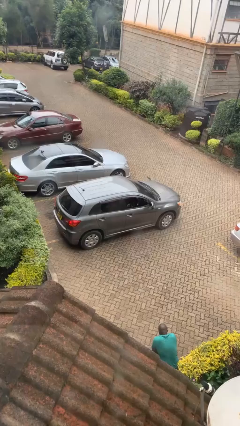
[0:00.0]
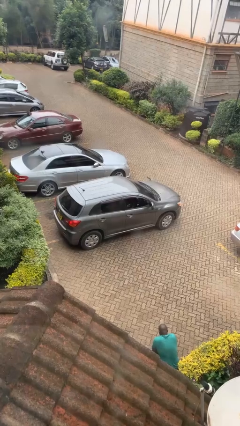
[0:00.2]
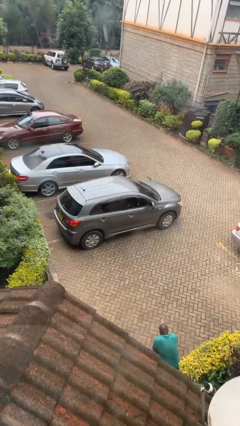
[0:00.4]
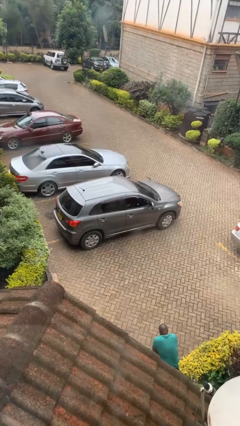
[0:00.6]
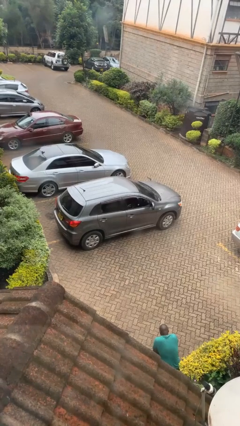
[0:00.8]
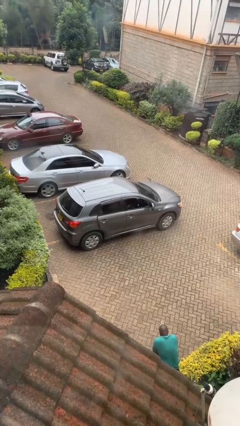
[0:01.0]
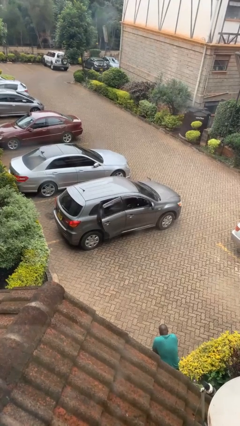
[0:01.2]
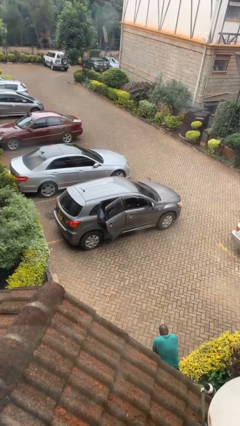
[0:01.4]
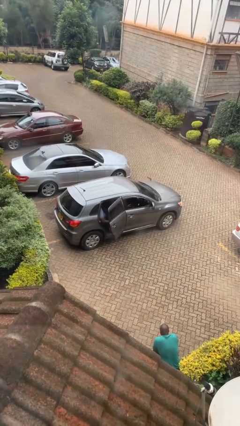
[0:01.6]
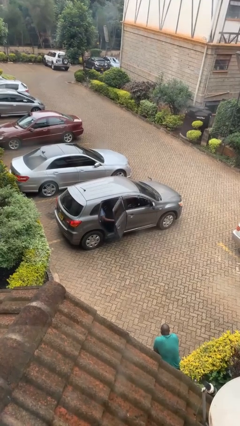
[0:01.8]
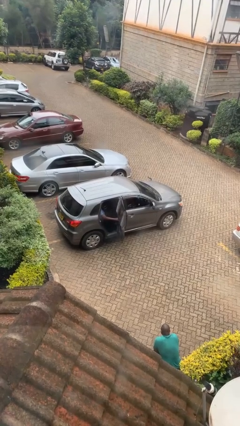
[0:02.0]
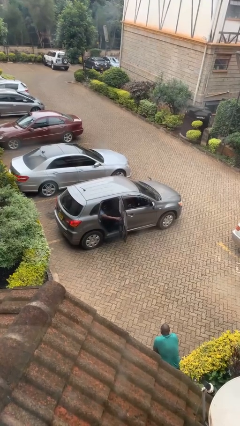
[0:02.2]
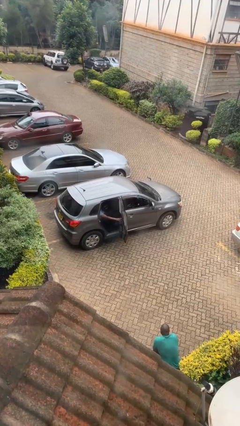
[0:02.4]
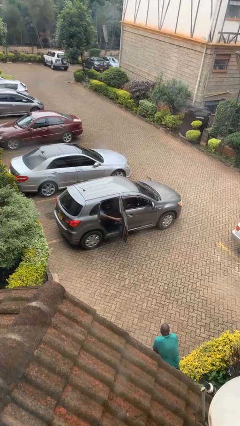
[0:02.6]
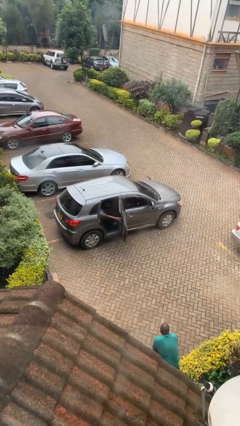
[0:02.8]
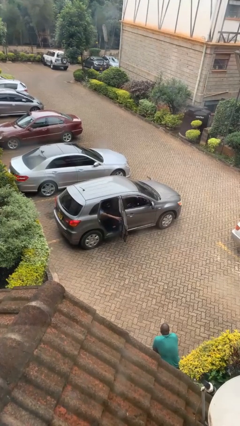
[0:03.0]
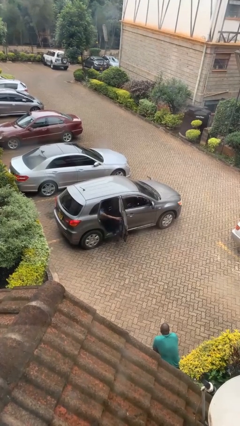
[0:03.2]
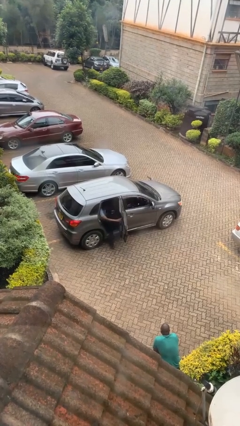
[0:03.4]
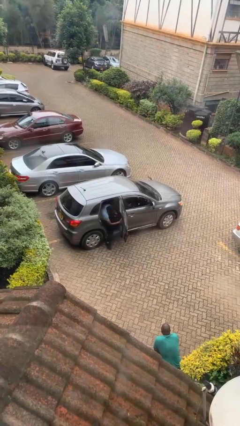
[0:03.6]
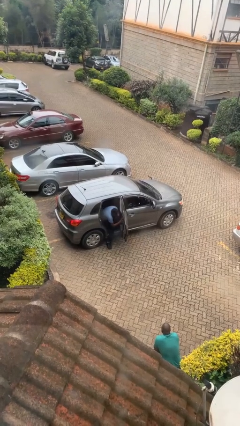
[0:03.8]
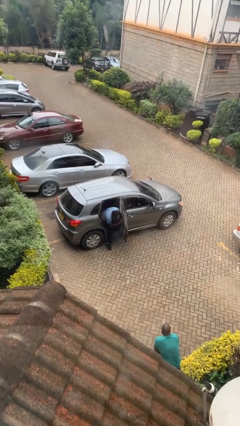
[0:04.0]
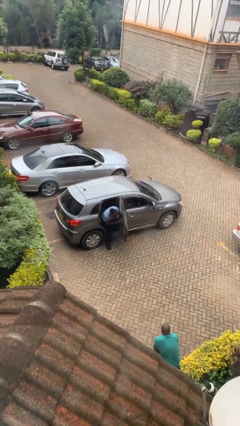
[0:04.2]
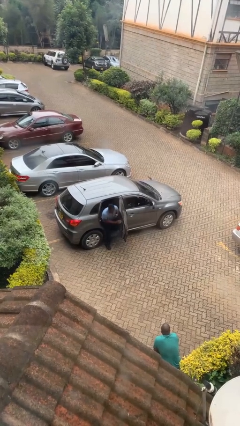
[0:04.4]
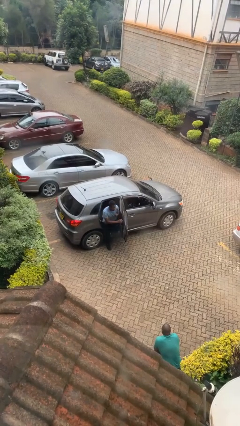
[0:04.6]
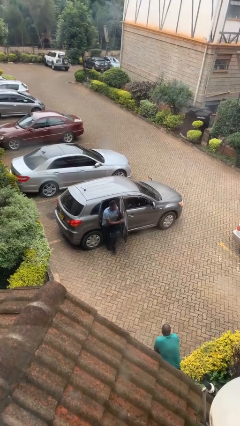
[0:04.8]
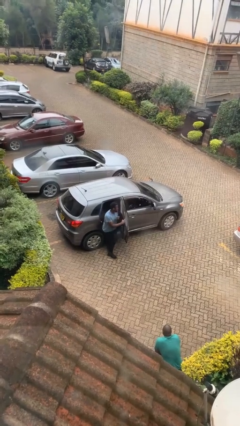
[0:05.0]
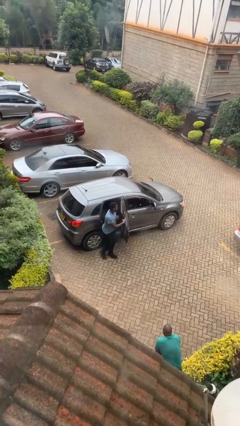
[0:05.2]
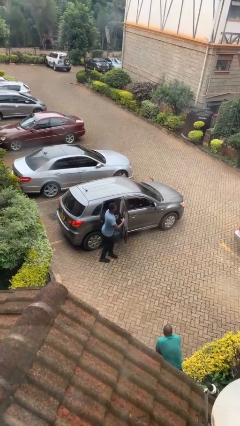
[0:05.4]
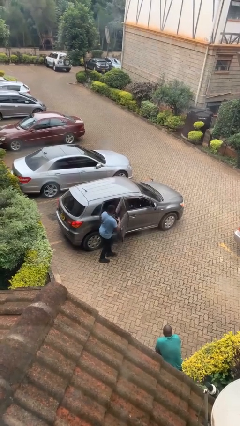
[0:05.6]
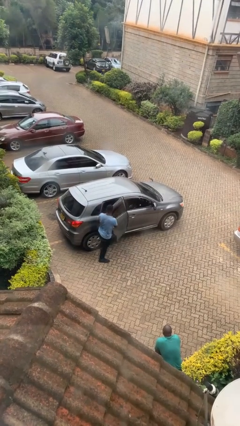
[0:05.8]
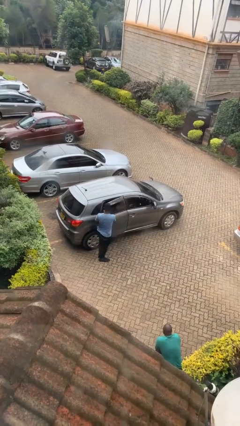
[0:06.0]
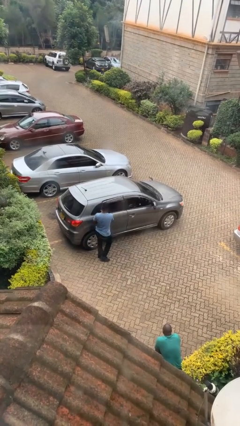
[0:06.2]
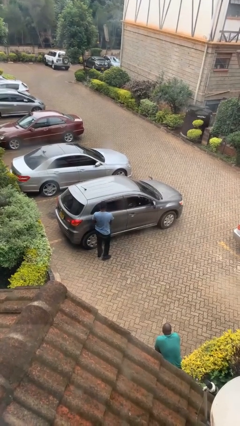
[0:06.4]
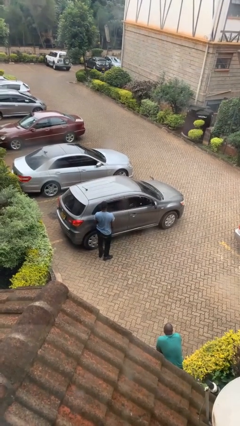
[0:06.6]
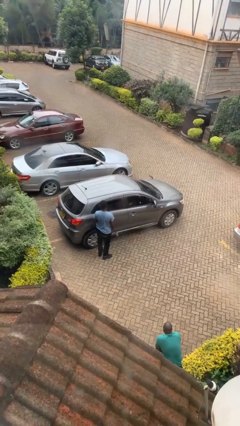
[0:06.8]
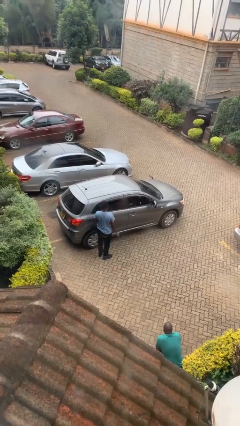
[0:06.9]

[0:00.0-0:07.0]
car drops off person

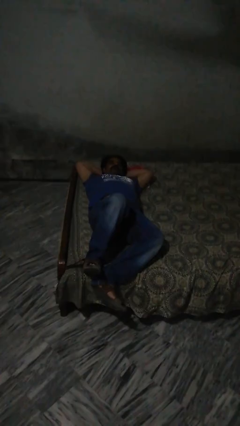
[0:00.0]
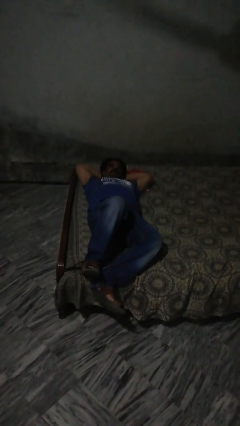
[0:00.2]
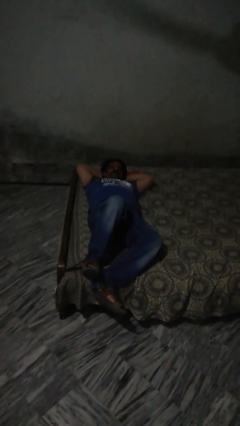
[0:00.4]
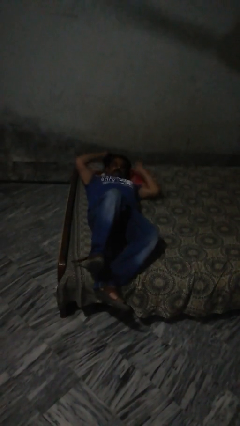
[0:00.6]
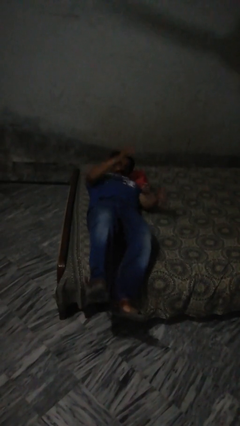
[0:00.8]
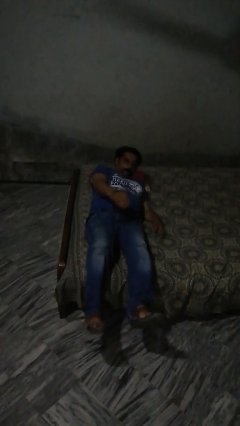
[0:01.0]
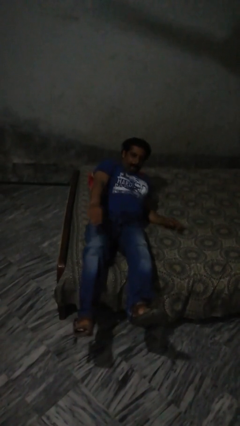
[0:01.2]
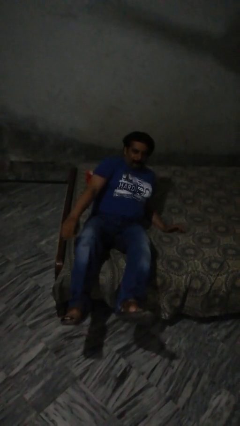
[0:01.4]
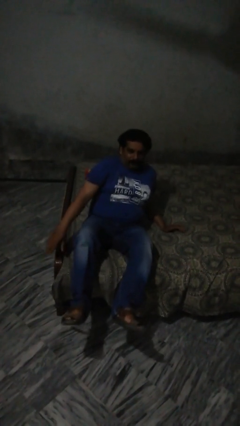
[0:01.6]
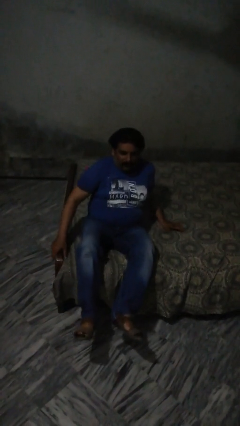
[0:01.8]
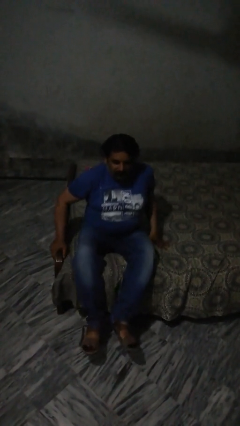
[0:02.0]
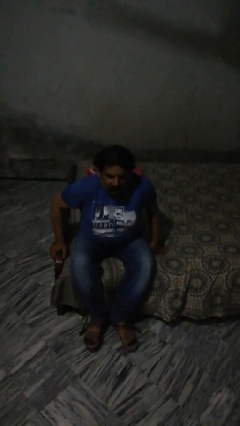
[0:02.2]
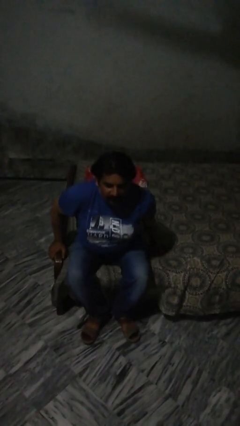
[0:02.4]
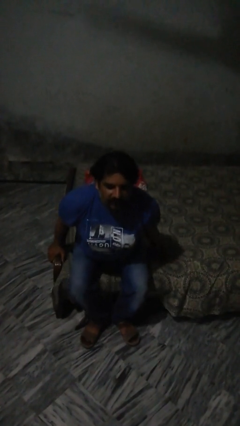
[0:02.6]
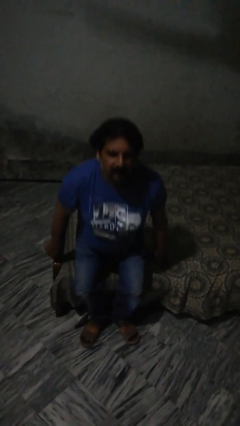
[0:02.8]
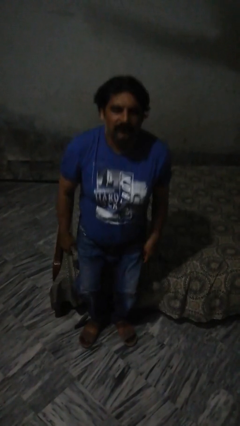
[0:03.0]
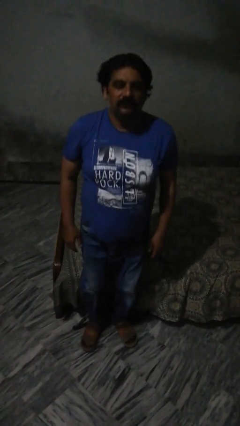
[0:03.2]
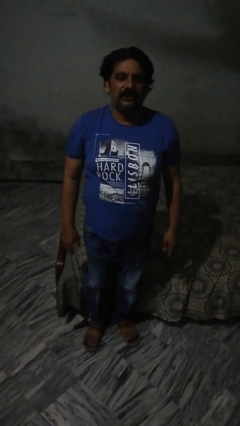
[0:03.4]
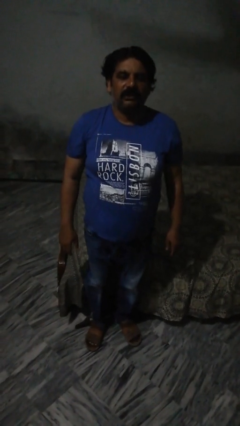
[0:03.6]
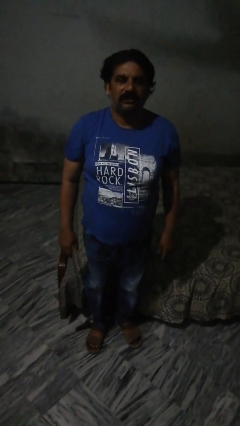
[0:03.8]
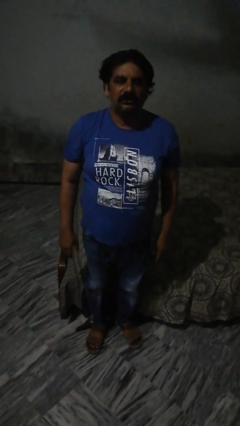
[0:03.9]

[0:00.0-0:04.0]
person stands up

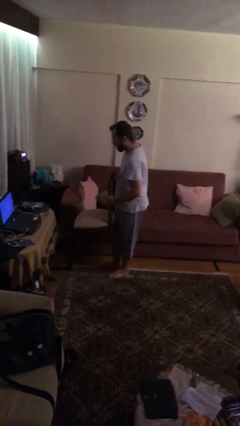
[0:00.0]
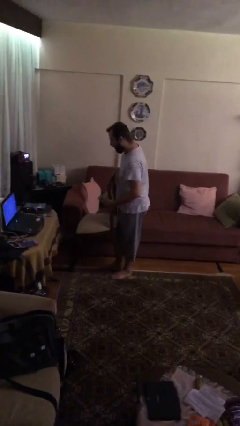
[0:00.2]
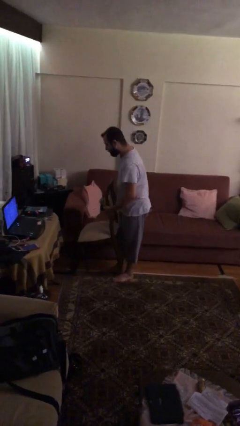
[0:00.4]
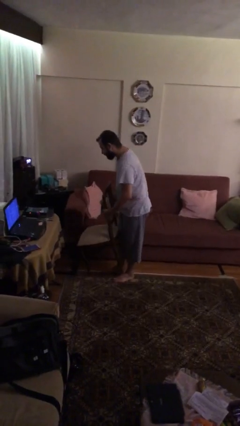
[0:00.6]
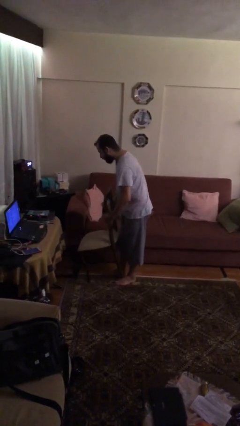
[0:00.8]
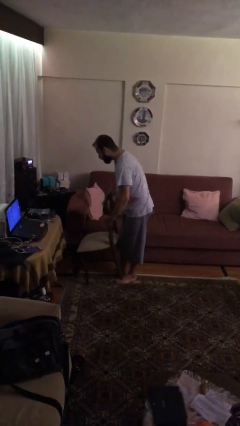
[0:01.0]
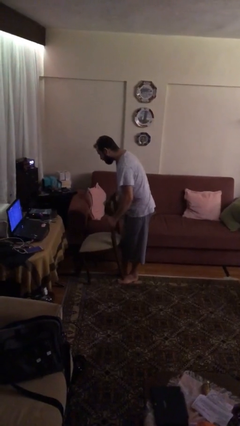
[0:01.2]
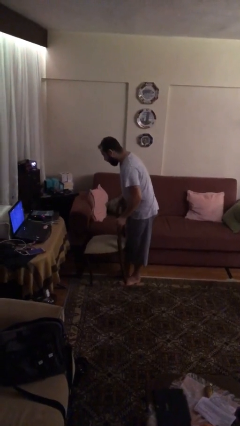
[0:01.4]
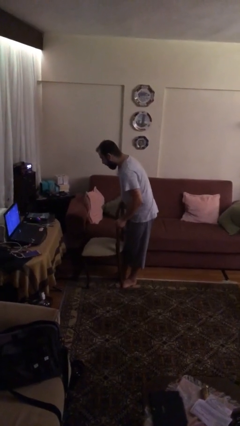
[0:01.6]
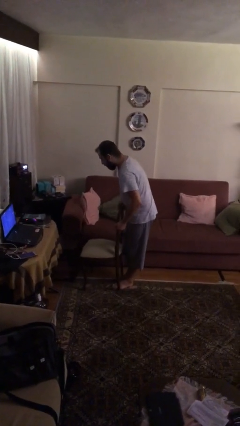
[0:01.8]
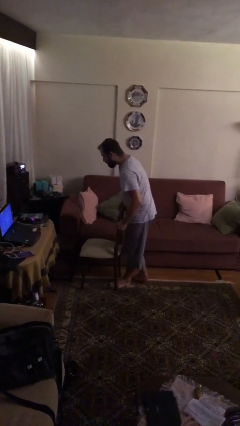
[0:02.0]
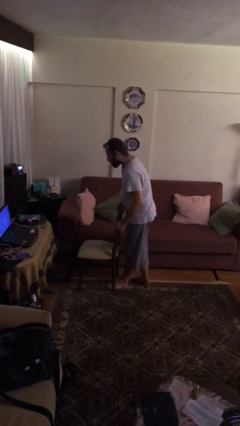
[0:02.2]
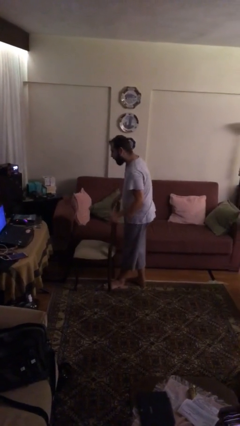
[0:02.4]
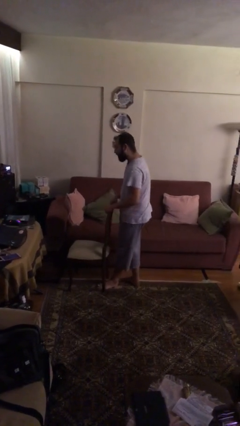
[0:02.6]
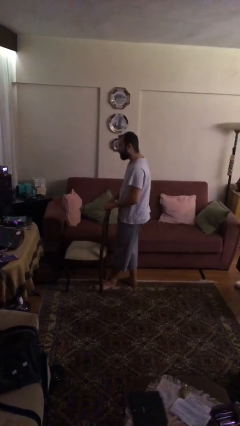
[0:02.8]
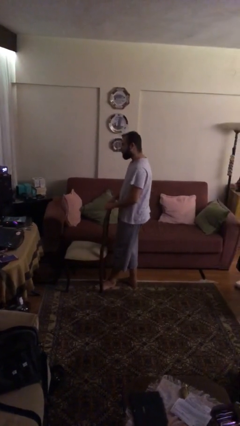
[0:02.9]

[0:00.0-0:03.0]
person puts down object on floor

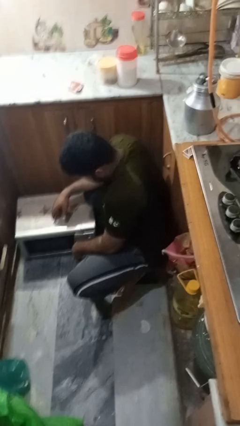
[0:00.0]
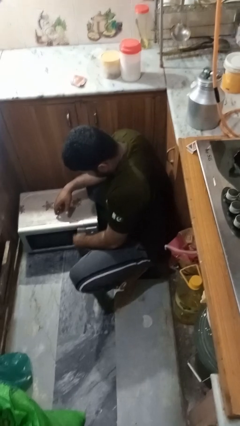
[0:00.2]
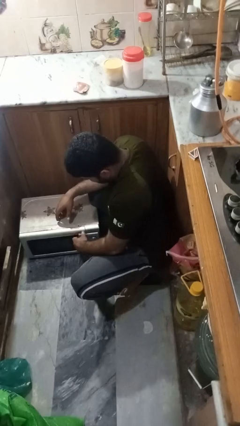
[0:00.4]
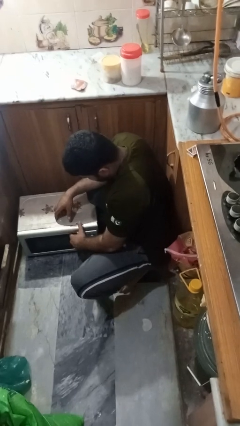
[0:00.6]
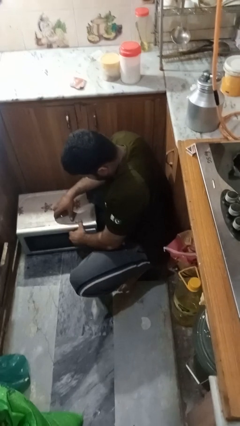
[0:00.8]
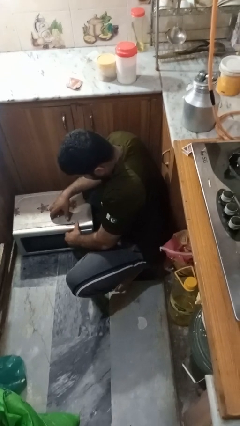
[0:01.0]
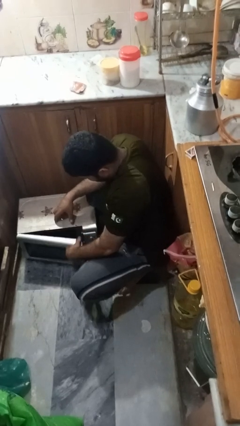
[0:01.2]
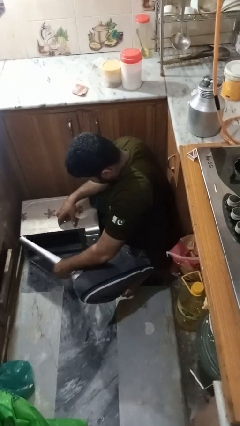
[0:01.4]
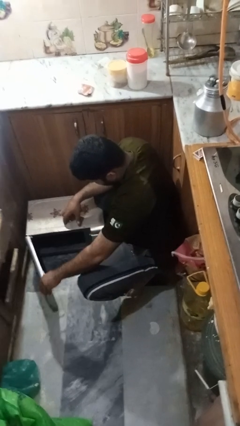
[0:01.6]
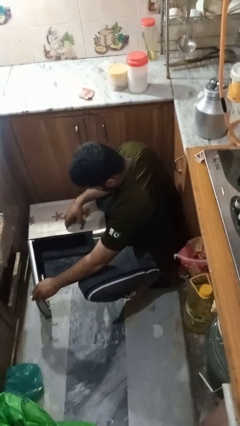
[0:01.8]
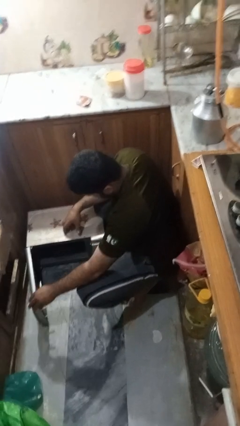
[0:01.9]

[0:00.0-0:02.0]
person opens oven door

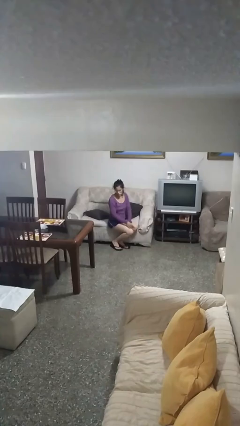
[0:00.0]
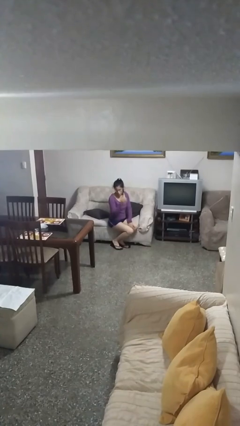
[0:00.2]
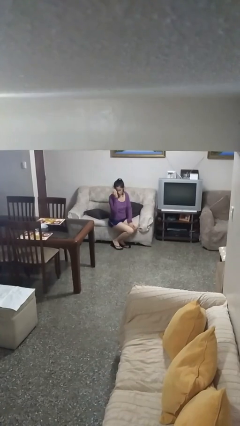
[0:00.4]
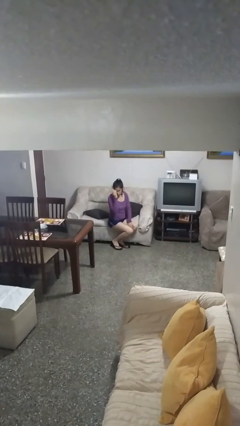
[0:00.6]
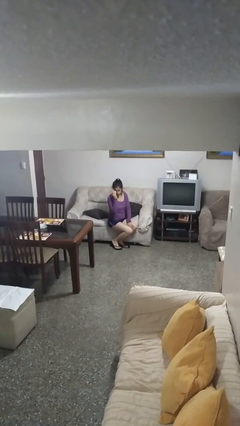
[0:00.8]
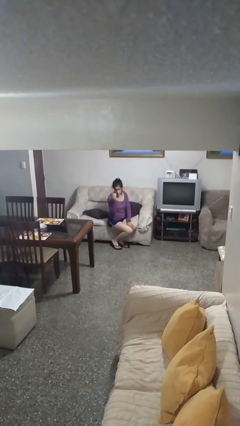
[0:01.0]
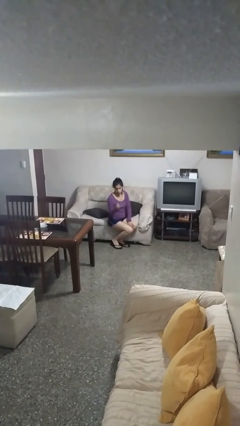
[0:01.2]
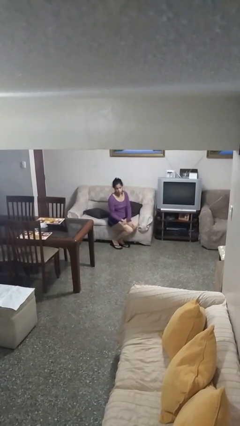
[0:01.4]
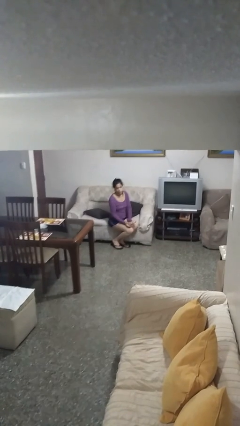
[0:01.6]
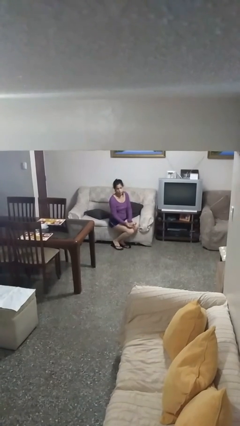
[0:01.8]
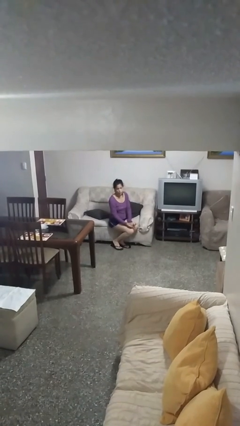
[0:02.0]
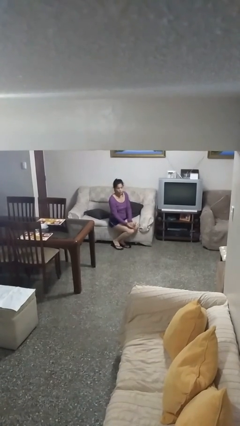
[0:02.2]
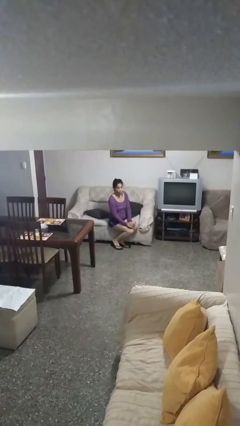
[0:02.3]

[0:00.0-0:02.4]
person takes off glasses
